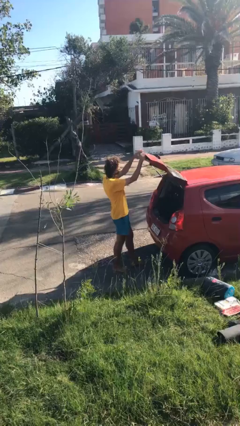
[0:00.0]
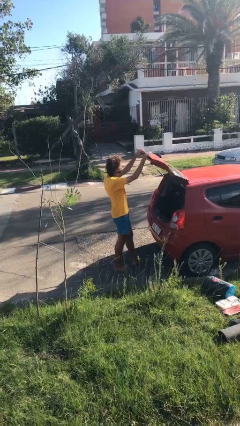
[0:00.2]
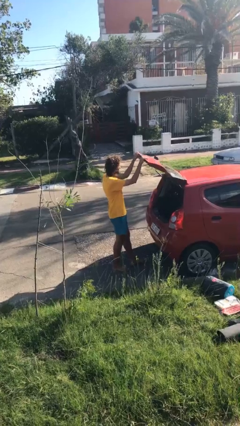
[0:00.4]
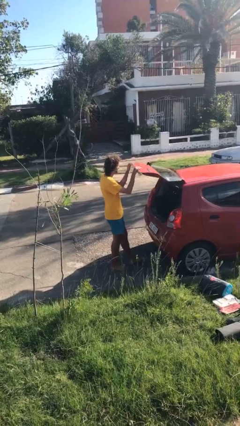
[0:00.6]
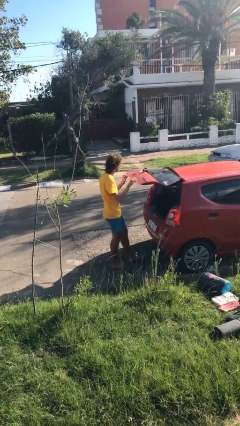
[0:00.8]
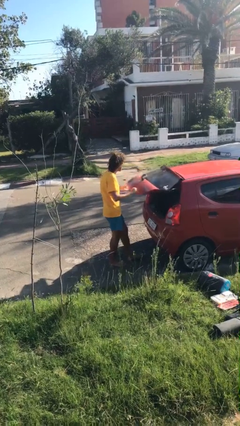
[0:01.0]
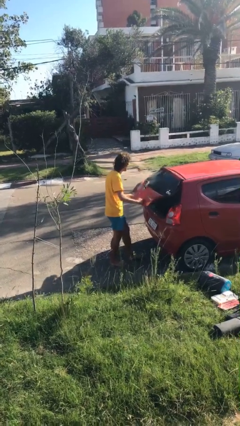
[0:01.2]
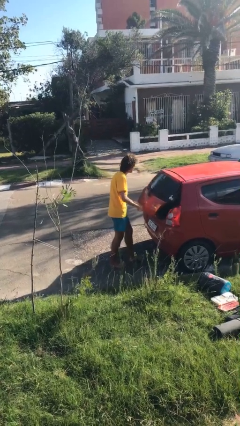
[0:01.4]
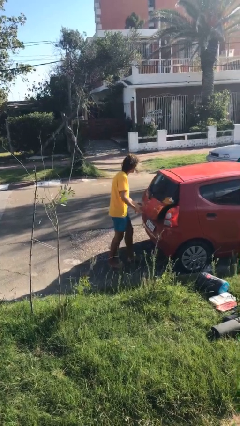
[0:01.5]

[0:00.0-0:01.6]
person closes car trunk

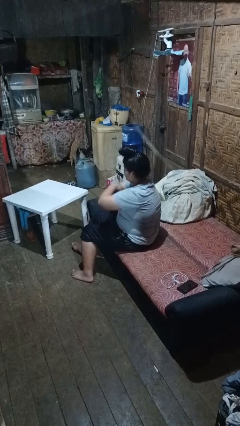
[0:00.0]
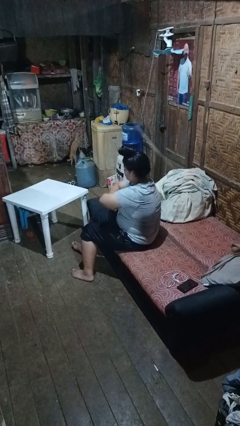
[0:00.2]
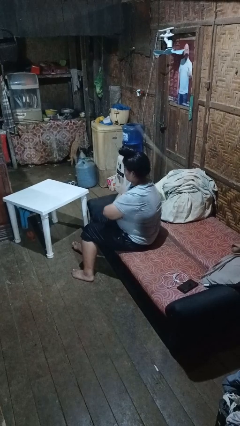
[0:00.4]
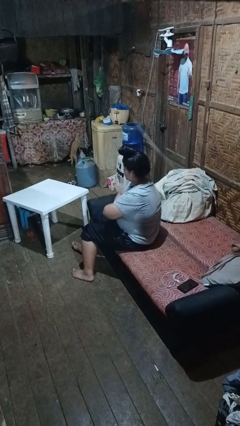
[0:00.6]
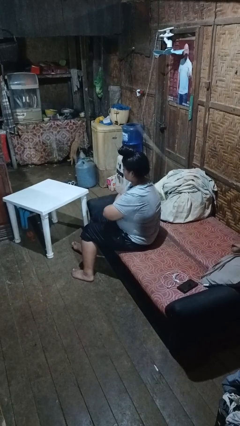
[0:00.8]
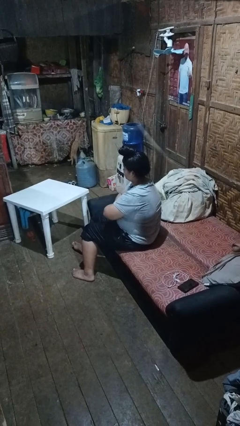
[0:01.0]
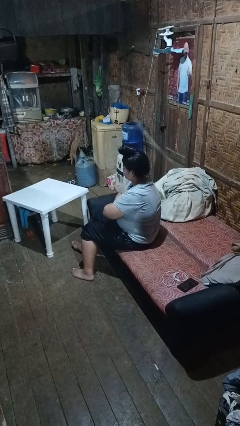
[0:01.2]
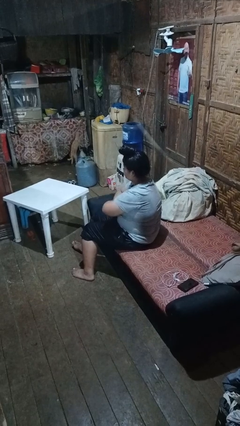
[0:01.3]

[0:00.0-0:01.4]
person crosses arms

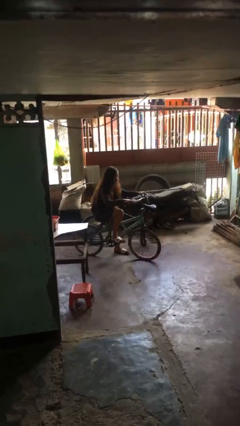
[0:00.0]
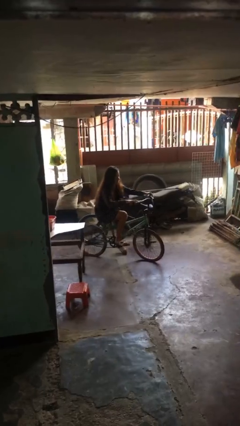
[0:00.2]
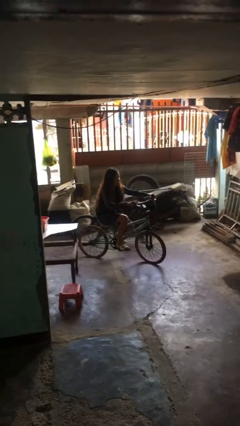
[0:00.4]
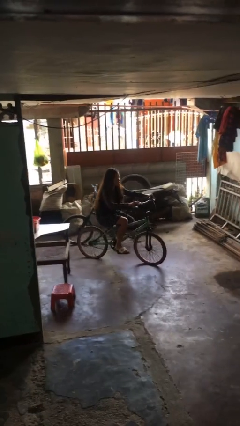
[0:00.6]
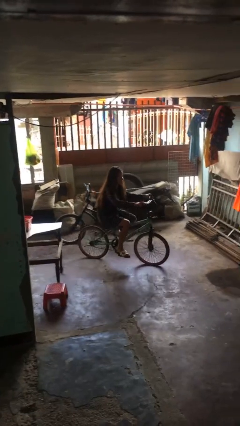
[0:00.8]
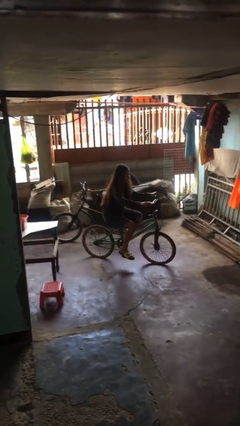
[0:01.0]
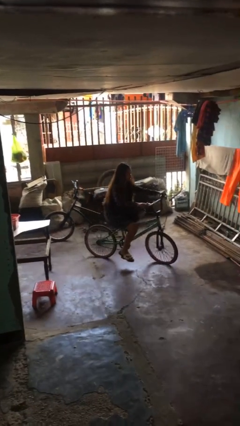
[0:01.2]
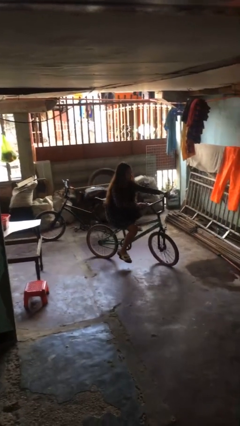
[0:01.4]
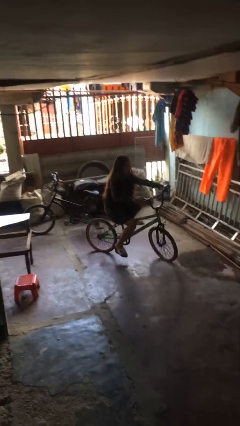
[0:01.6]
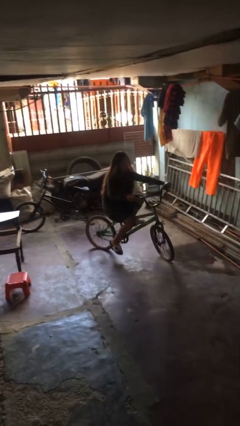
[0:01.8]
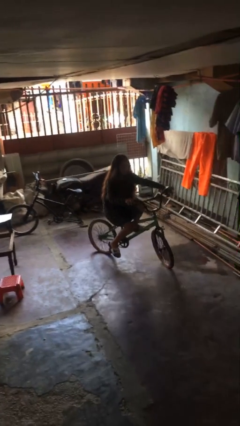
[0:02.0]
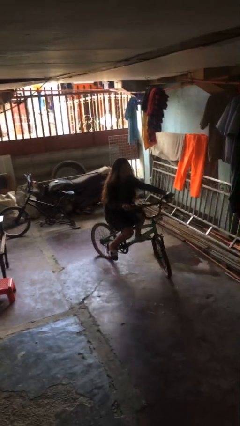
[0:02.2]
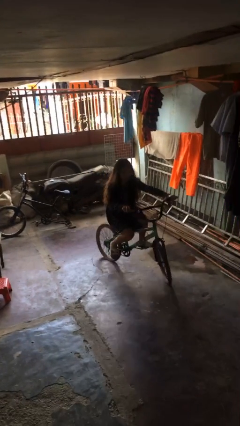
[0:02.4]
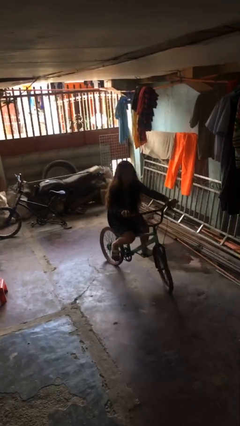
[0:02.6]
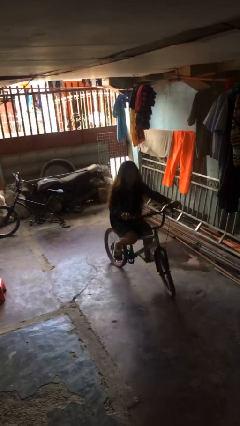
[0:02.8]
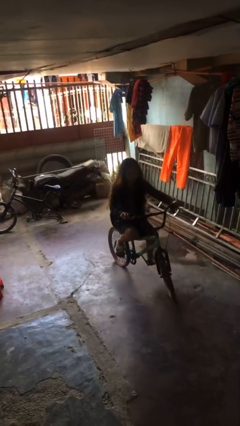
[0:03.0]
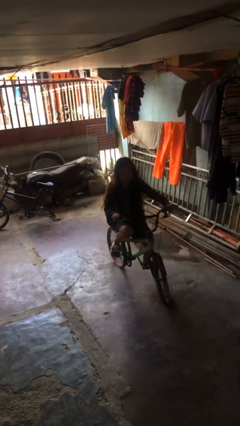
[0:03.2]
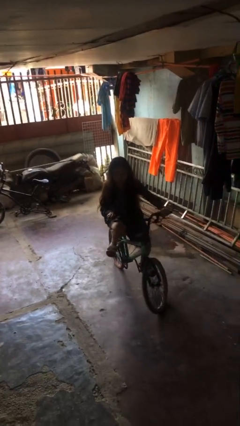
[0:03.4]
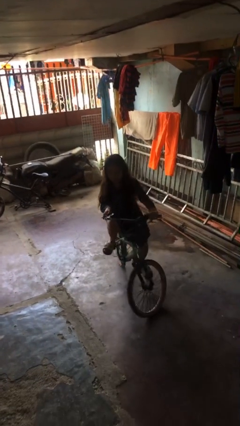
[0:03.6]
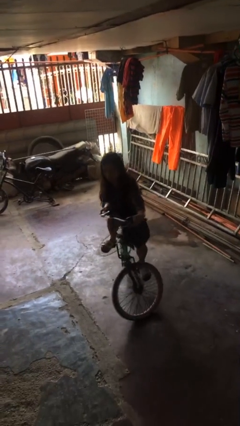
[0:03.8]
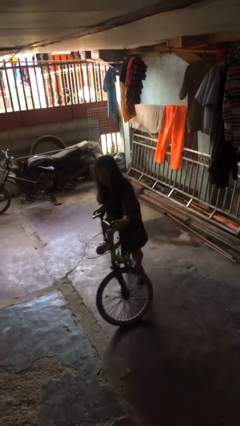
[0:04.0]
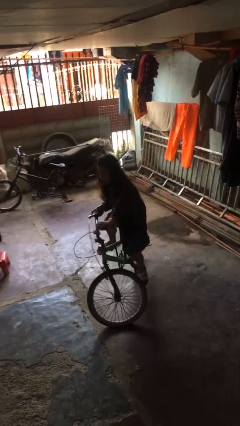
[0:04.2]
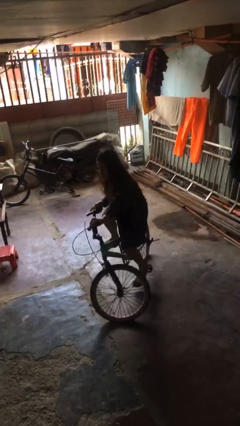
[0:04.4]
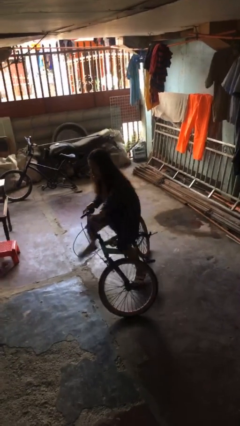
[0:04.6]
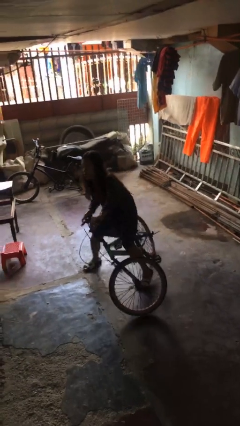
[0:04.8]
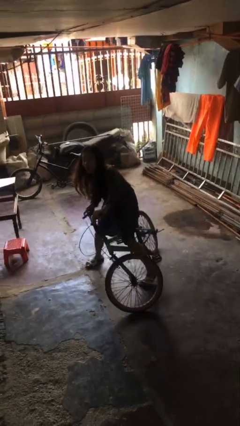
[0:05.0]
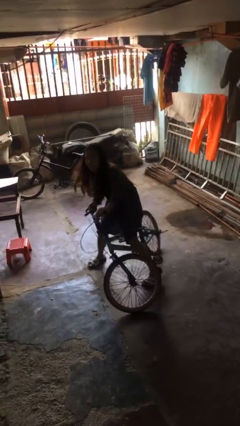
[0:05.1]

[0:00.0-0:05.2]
person rides bicycle

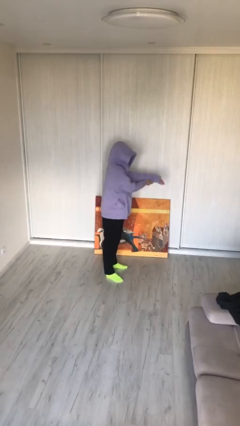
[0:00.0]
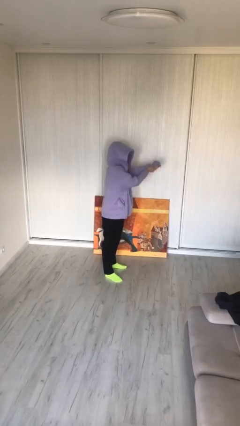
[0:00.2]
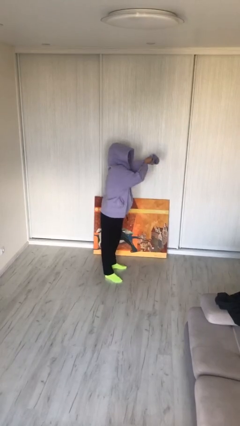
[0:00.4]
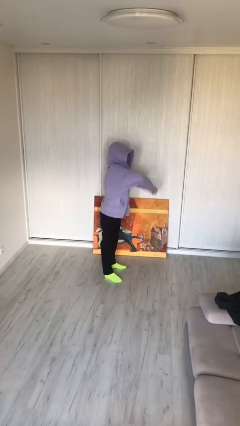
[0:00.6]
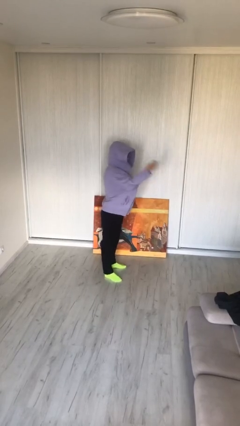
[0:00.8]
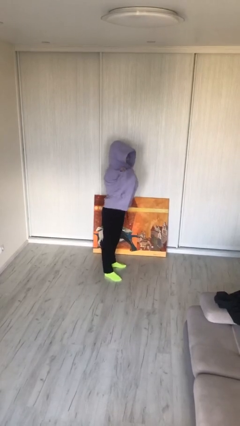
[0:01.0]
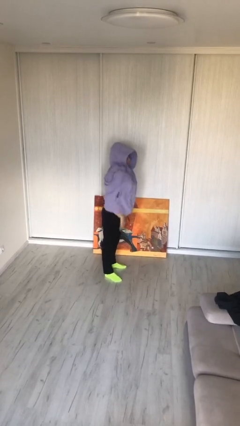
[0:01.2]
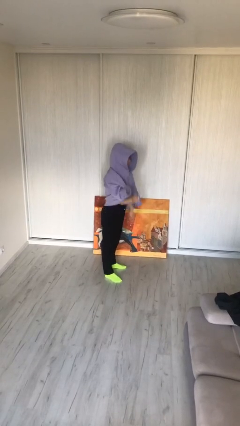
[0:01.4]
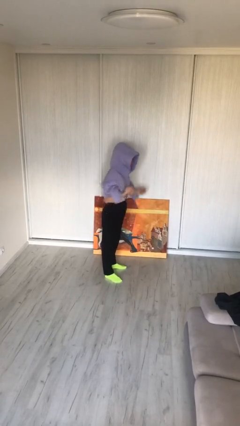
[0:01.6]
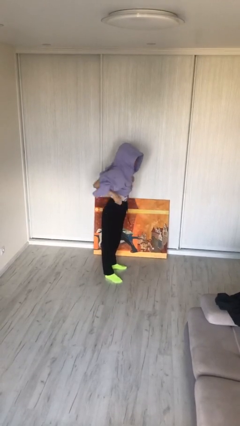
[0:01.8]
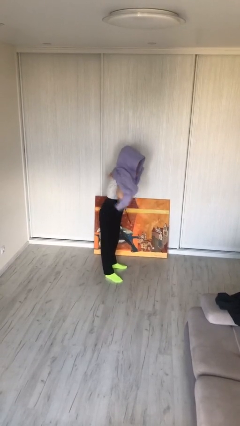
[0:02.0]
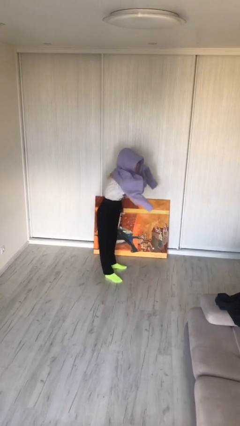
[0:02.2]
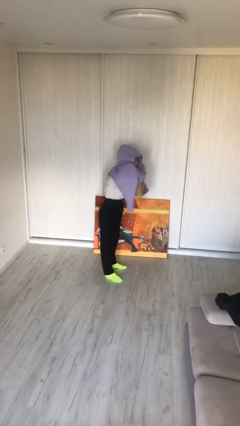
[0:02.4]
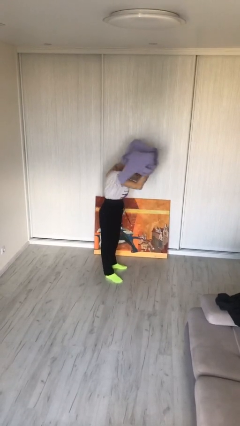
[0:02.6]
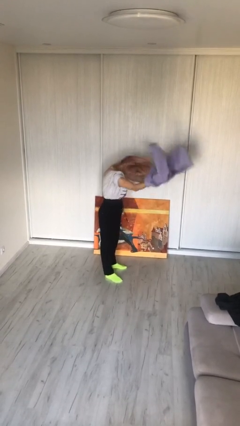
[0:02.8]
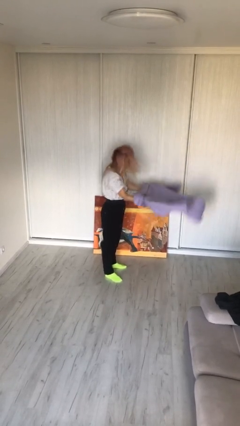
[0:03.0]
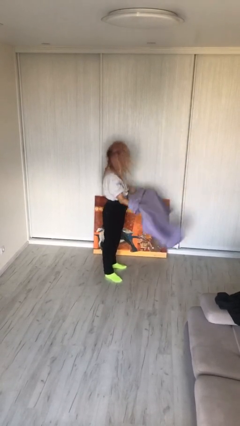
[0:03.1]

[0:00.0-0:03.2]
person takes off hoodie

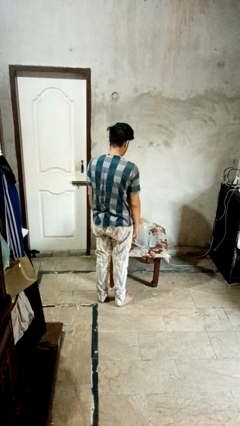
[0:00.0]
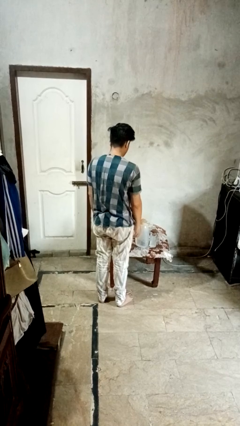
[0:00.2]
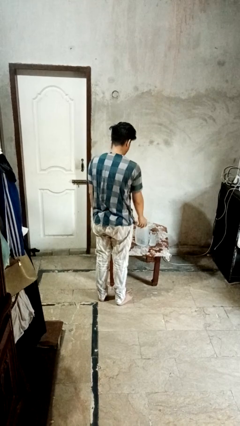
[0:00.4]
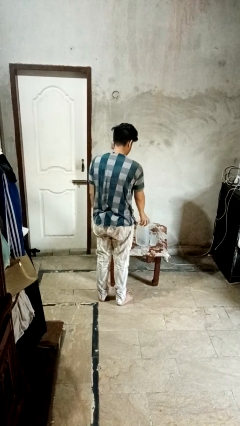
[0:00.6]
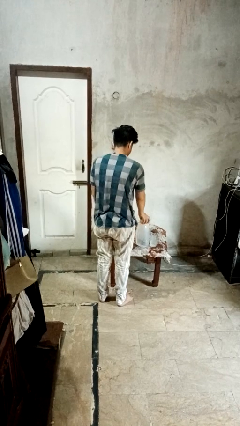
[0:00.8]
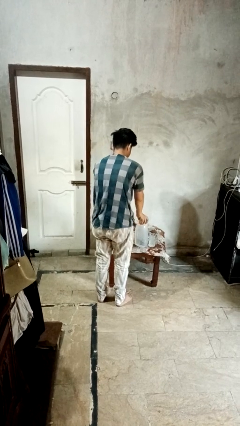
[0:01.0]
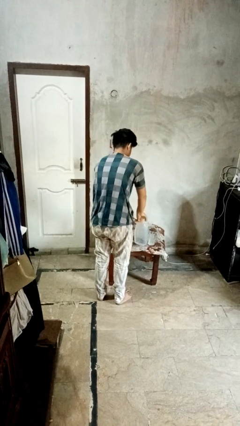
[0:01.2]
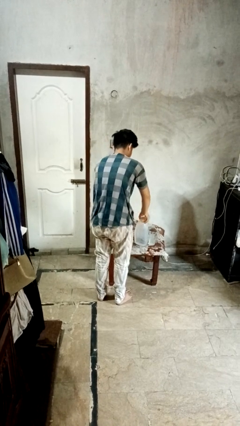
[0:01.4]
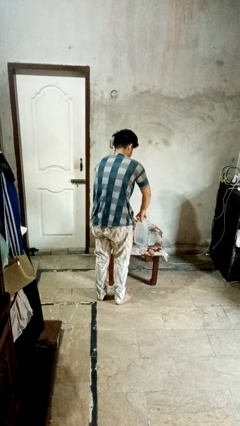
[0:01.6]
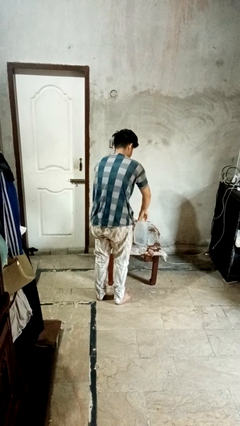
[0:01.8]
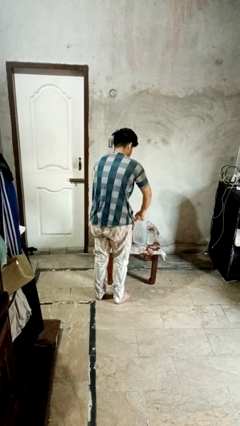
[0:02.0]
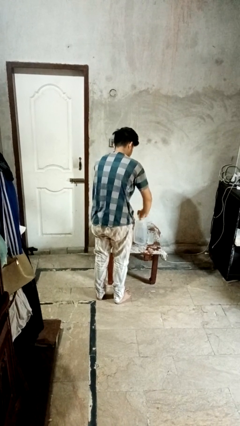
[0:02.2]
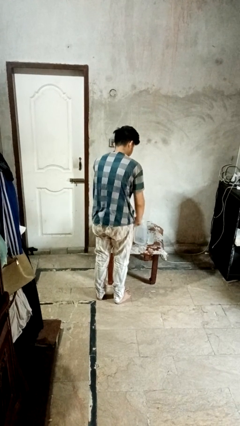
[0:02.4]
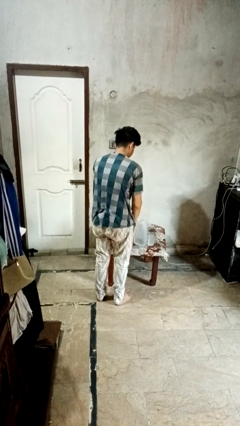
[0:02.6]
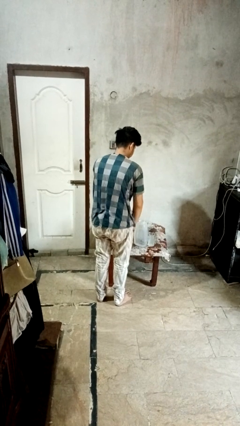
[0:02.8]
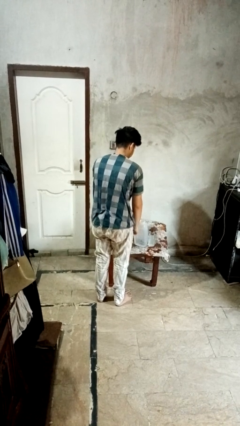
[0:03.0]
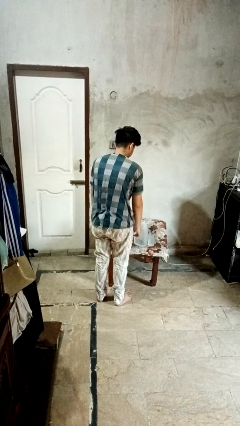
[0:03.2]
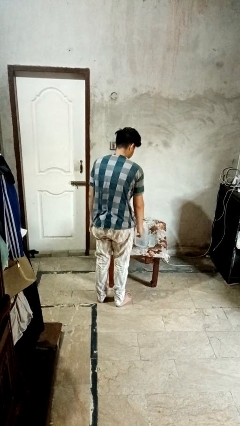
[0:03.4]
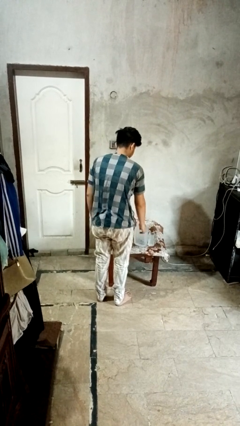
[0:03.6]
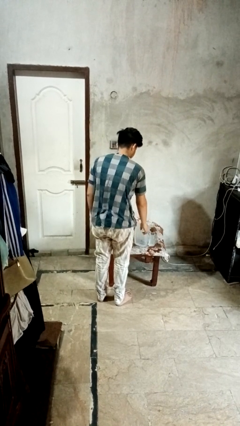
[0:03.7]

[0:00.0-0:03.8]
person unscrews lid from bottle

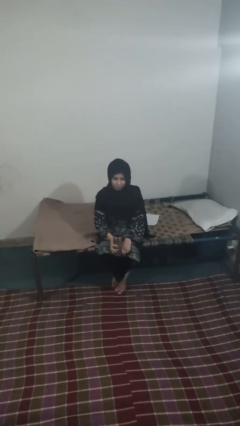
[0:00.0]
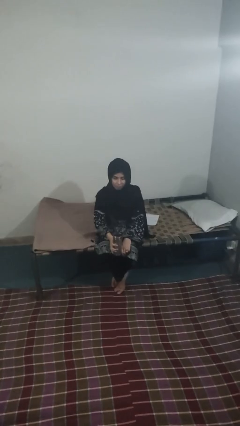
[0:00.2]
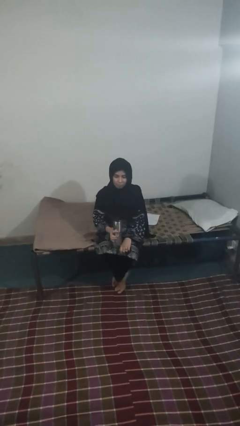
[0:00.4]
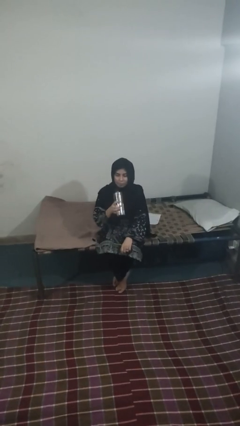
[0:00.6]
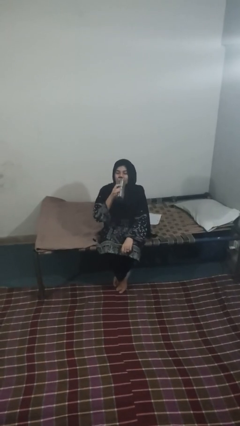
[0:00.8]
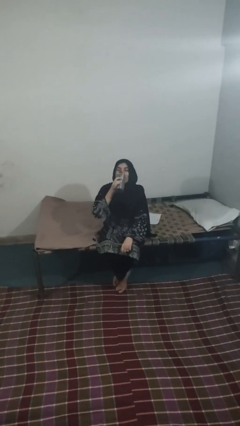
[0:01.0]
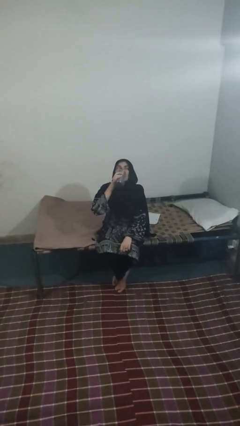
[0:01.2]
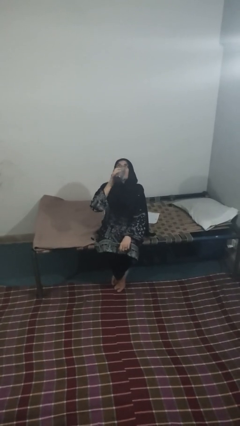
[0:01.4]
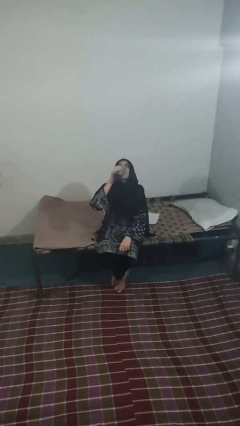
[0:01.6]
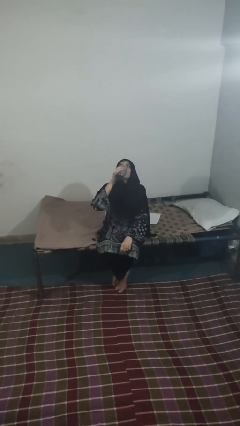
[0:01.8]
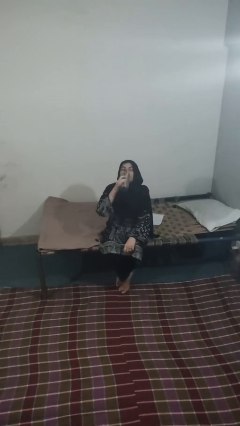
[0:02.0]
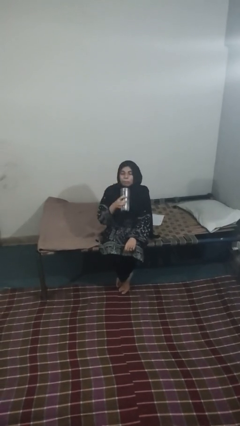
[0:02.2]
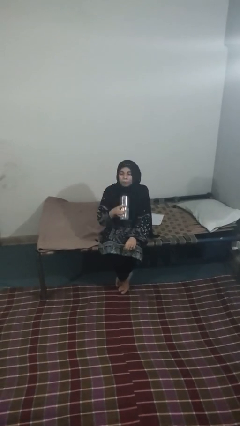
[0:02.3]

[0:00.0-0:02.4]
person drinks from beverage can
